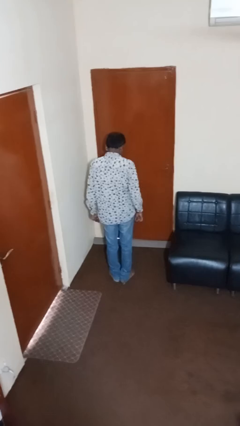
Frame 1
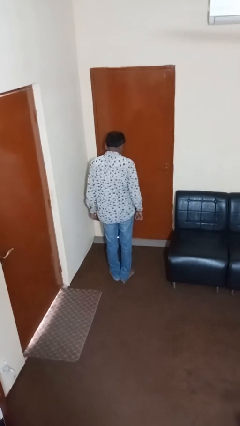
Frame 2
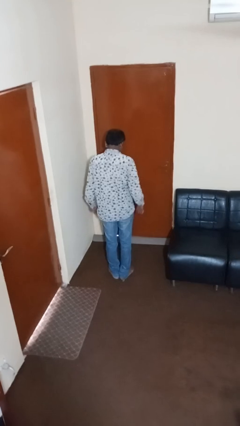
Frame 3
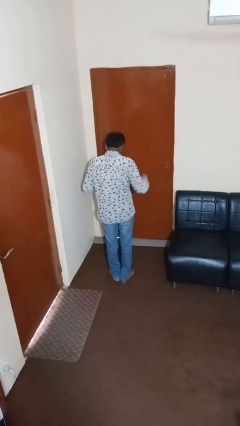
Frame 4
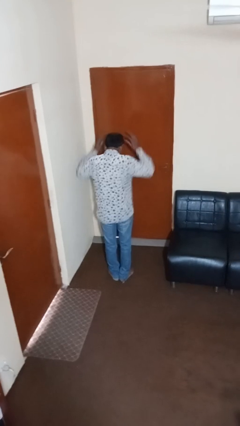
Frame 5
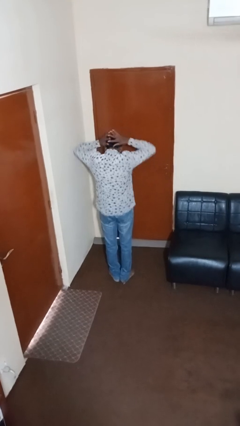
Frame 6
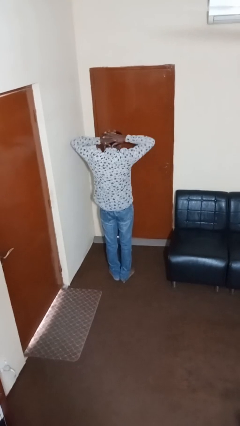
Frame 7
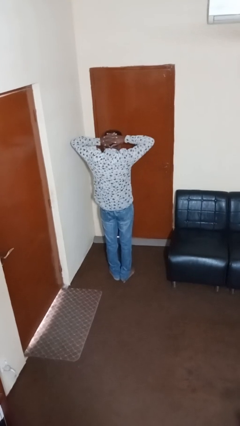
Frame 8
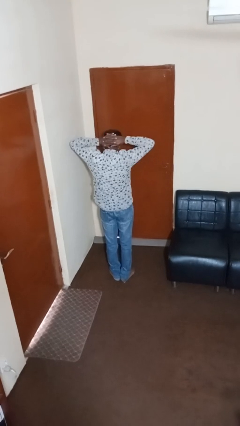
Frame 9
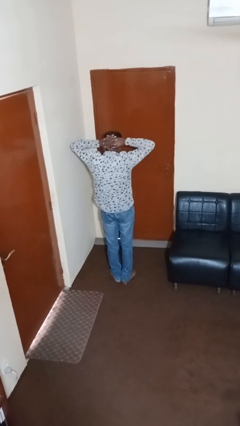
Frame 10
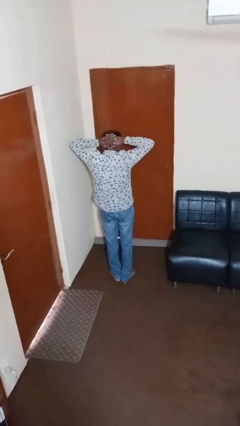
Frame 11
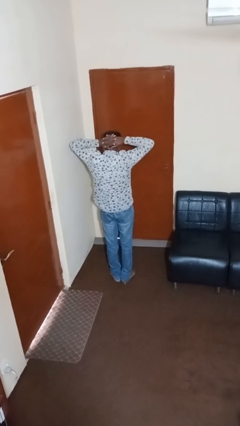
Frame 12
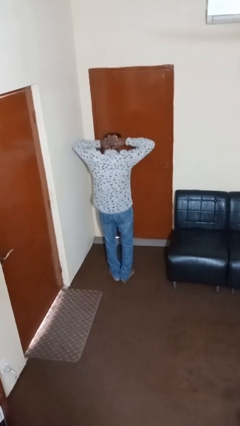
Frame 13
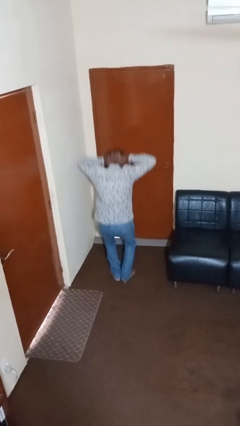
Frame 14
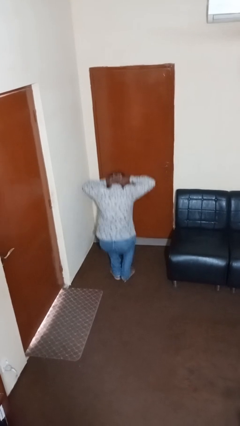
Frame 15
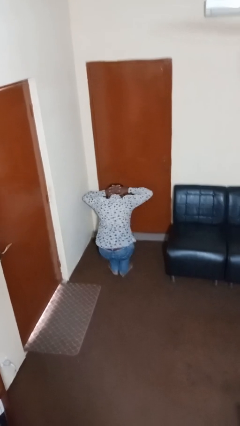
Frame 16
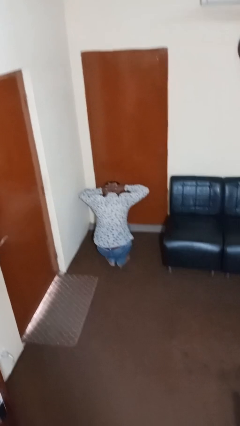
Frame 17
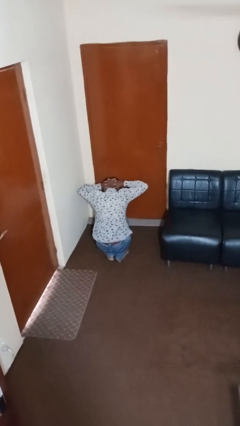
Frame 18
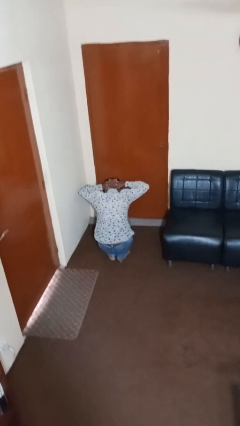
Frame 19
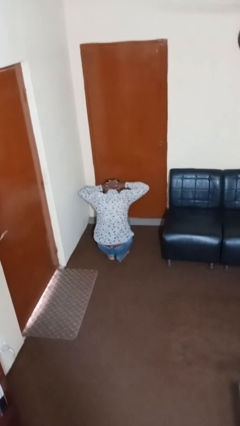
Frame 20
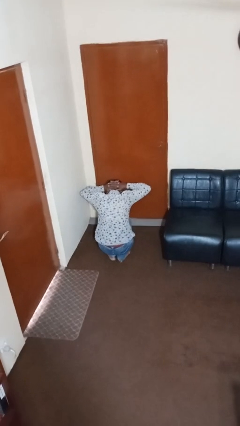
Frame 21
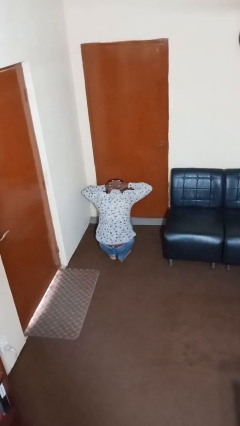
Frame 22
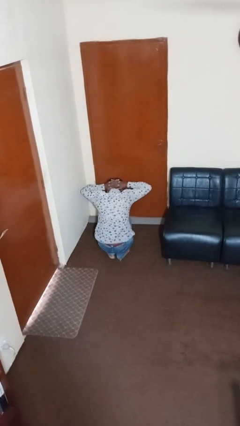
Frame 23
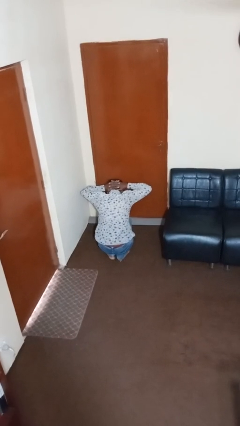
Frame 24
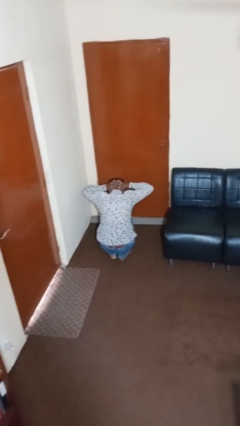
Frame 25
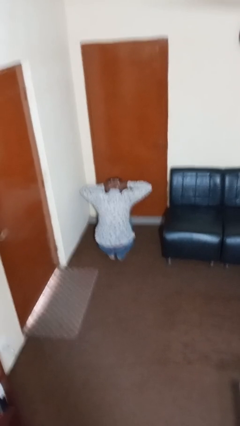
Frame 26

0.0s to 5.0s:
person exercises with situp

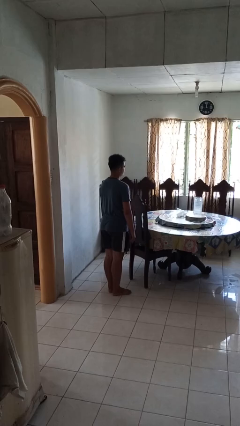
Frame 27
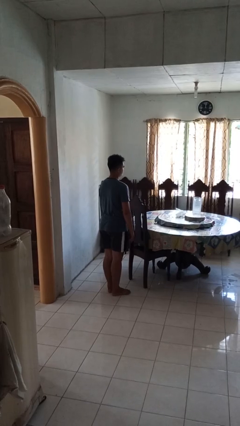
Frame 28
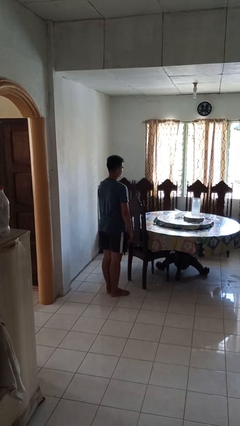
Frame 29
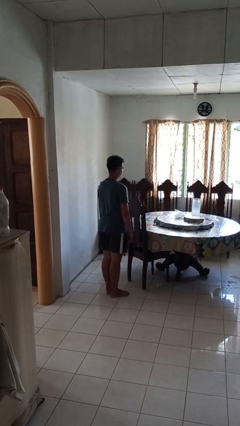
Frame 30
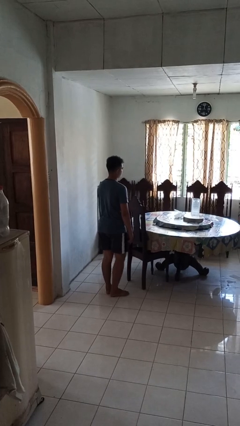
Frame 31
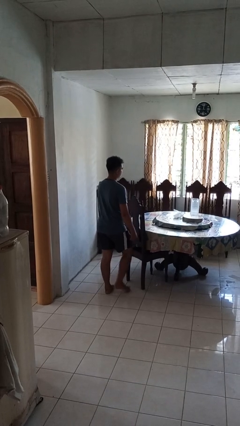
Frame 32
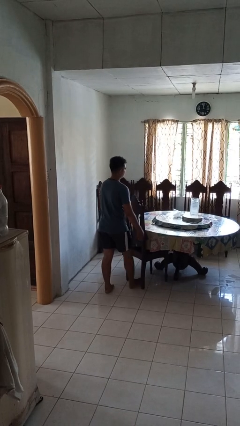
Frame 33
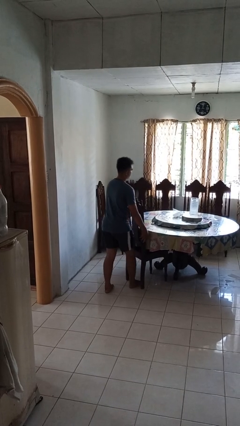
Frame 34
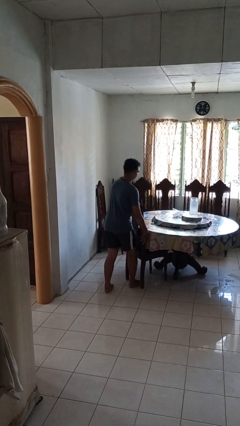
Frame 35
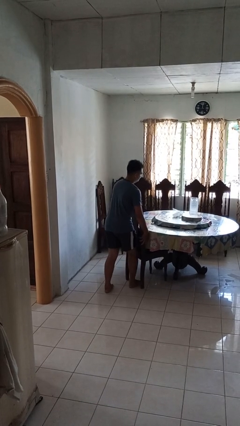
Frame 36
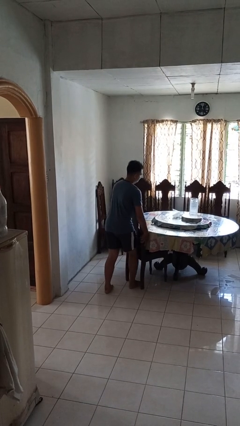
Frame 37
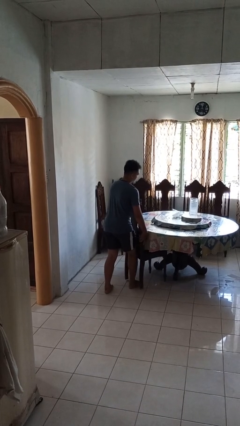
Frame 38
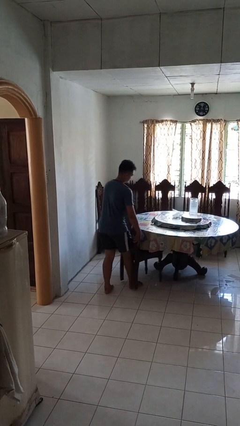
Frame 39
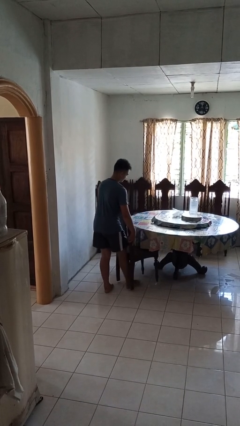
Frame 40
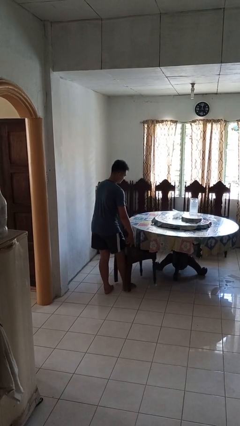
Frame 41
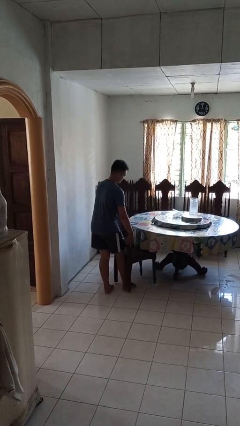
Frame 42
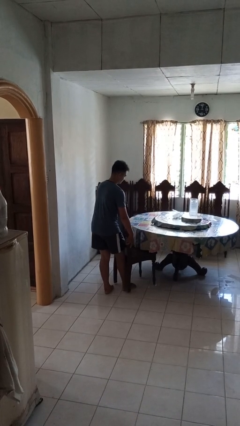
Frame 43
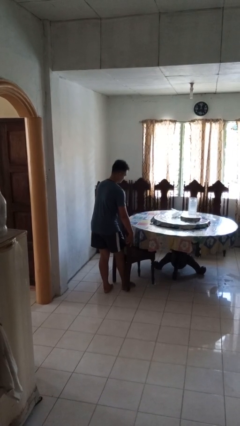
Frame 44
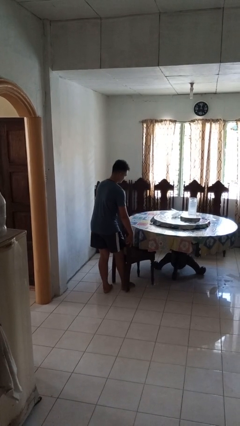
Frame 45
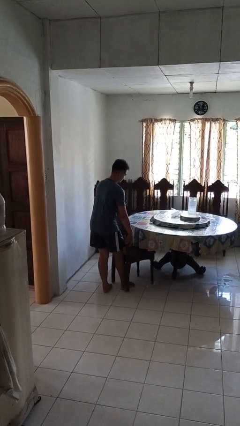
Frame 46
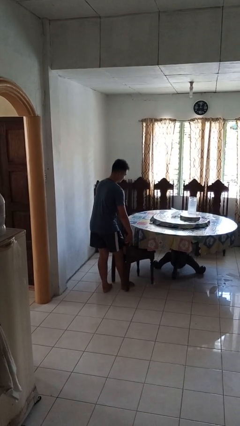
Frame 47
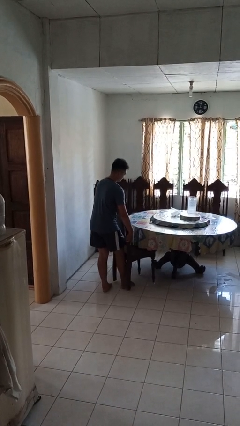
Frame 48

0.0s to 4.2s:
person pulls out chair

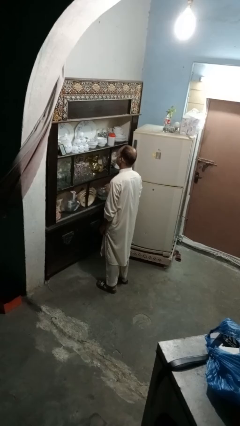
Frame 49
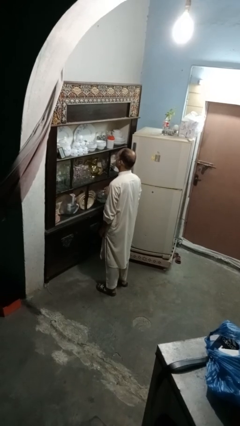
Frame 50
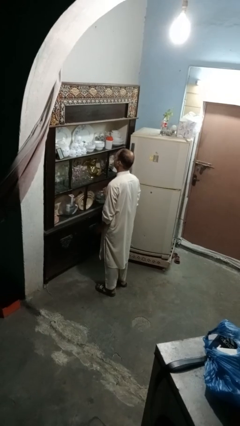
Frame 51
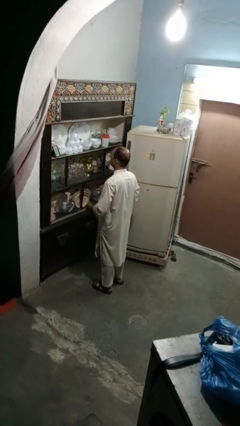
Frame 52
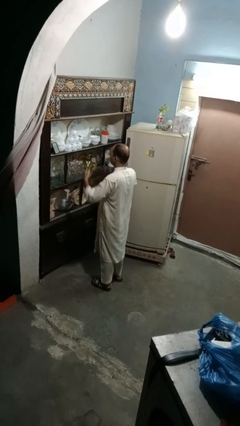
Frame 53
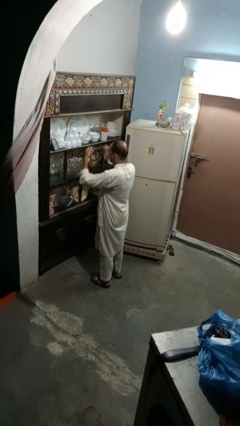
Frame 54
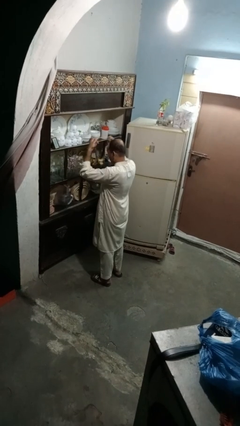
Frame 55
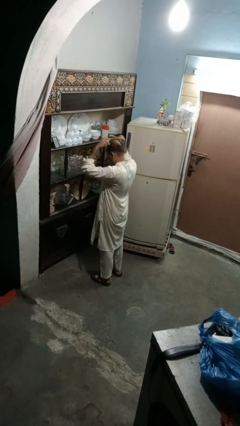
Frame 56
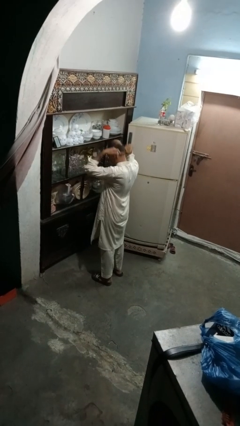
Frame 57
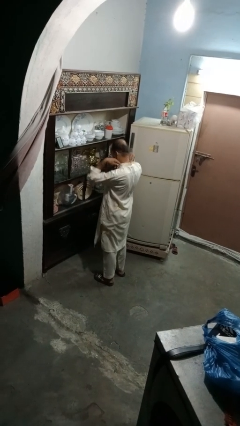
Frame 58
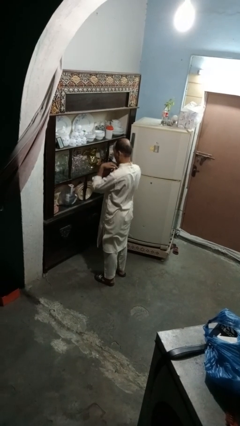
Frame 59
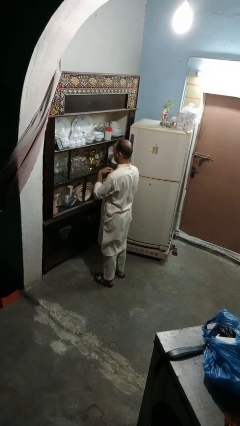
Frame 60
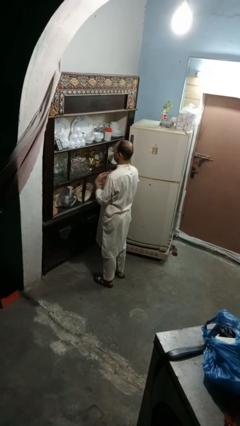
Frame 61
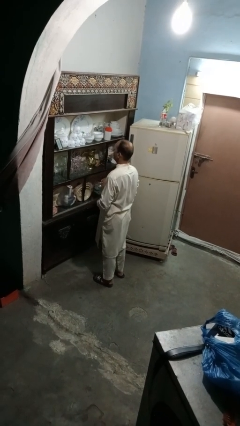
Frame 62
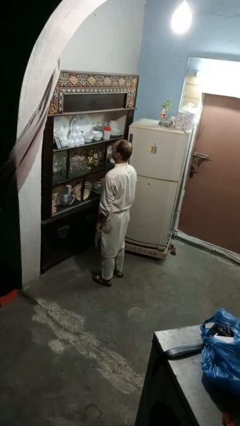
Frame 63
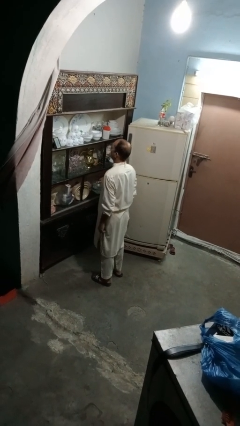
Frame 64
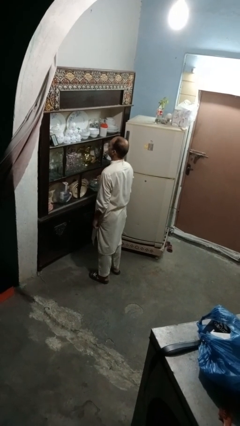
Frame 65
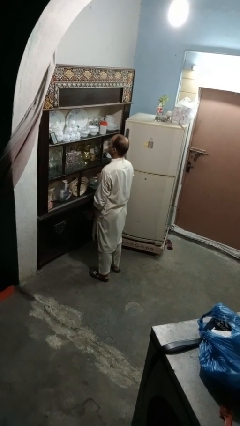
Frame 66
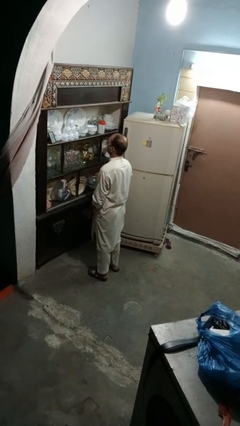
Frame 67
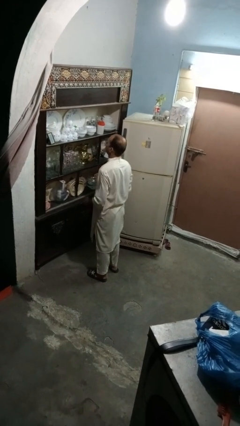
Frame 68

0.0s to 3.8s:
person puts on necklace

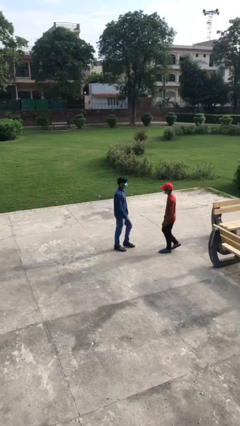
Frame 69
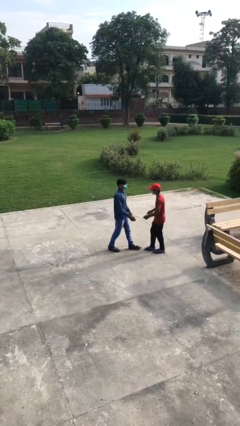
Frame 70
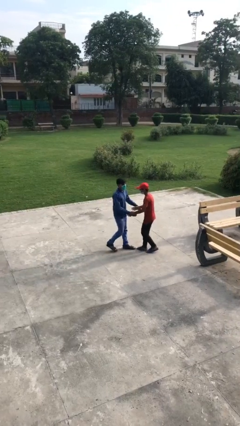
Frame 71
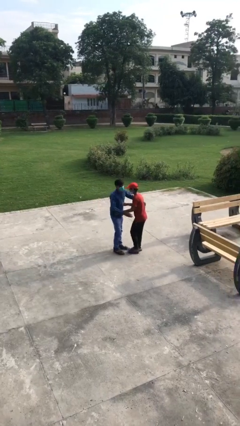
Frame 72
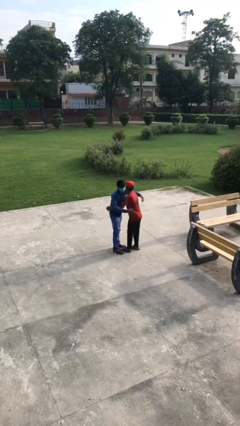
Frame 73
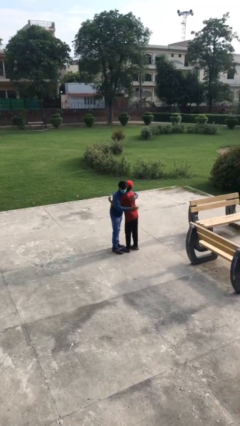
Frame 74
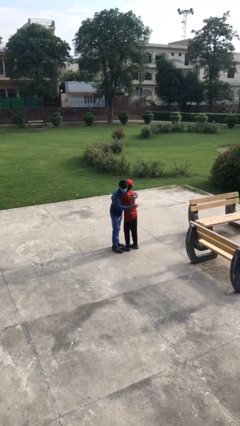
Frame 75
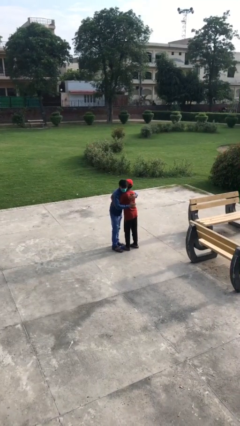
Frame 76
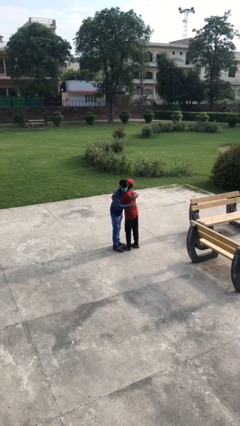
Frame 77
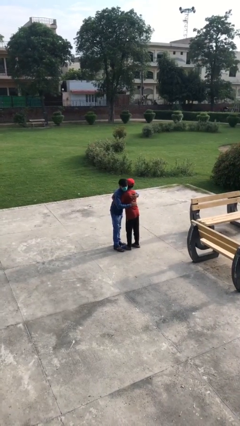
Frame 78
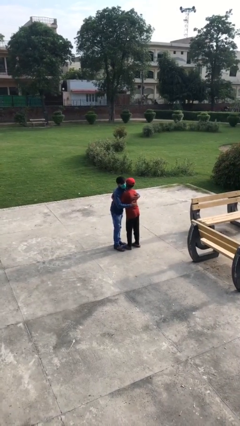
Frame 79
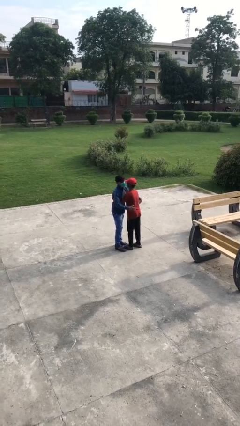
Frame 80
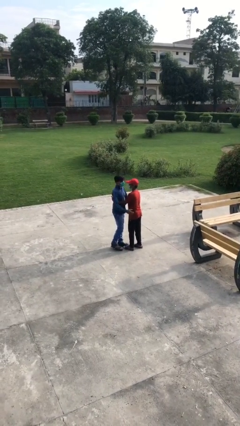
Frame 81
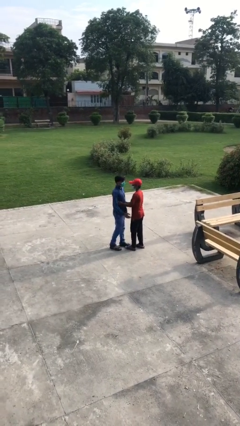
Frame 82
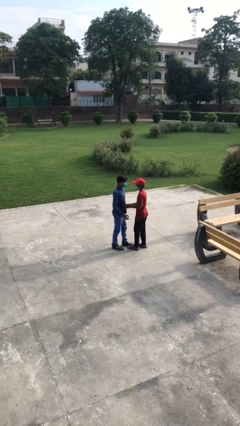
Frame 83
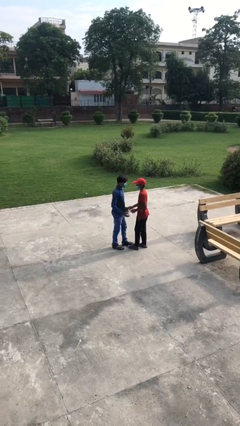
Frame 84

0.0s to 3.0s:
person embraces person

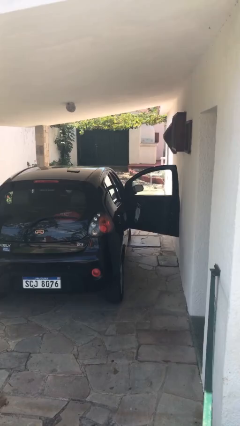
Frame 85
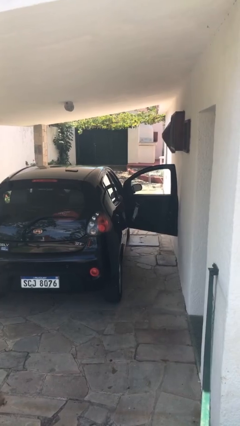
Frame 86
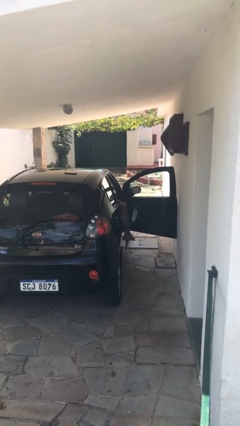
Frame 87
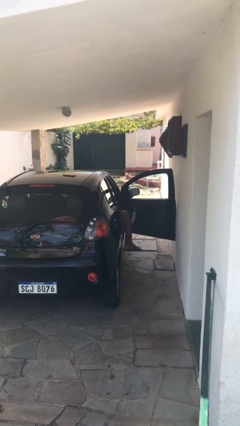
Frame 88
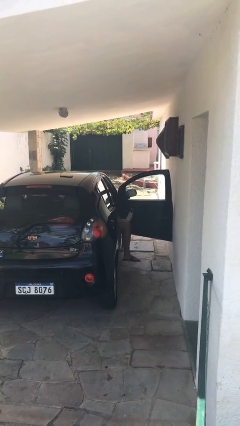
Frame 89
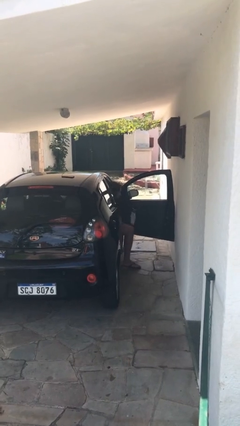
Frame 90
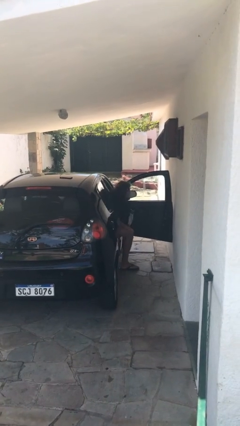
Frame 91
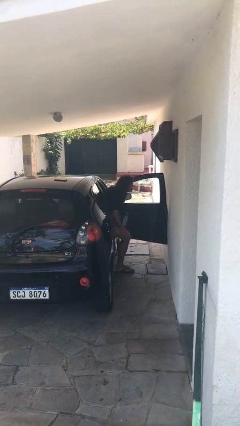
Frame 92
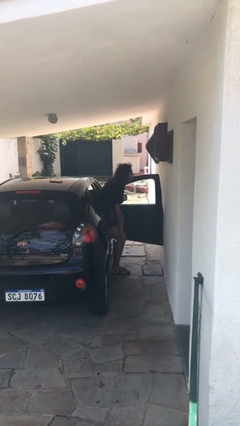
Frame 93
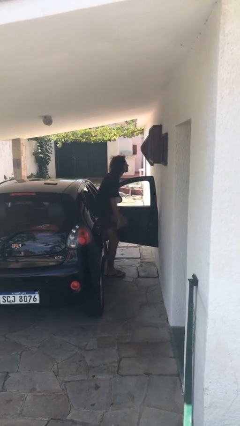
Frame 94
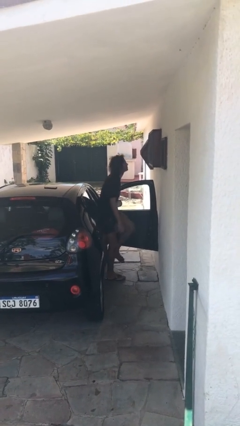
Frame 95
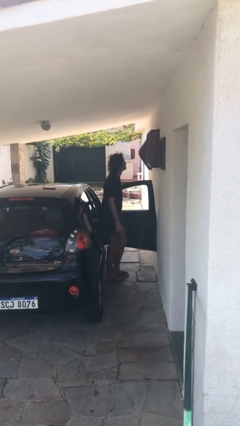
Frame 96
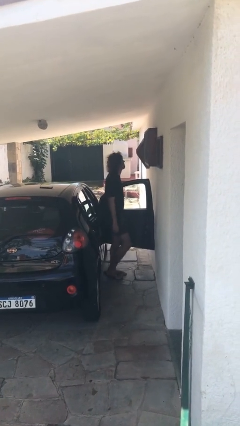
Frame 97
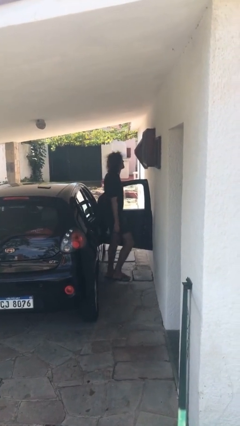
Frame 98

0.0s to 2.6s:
person exits car
